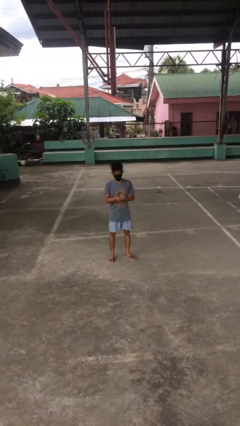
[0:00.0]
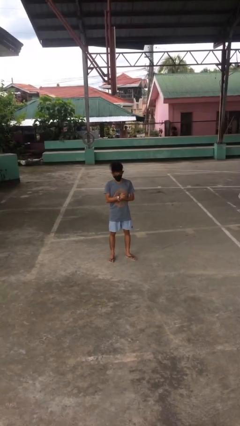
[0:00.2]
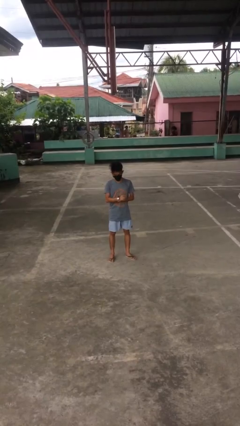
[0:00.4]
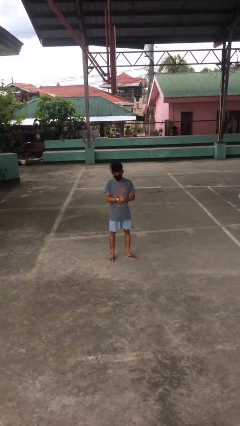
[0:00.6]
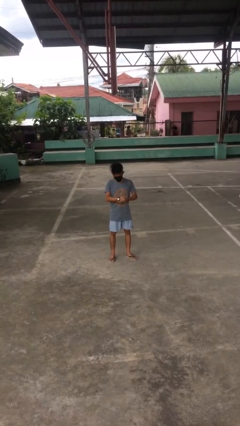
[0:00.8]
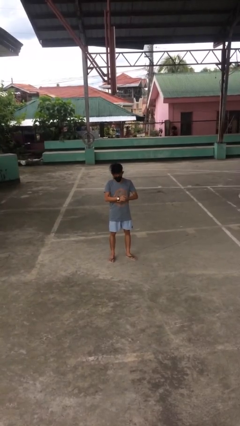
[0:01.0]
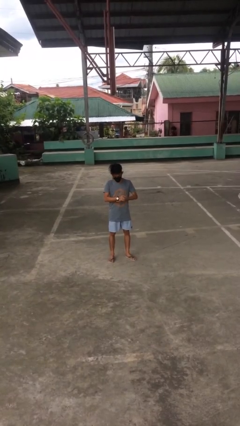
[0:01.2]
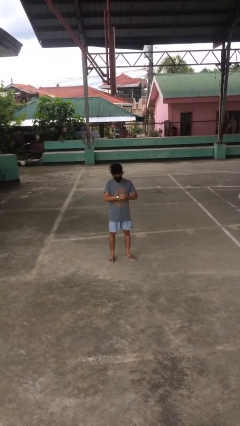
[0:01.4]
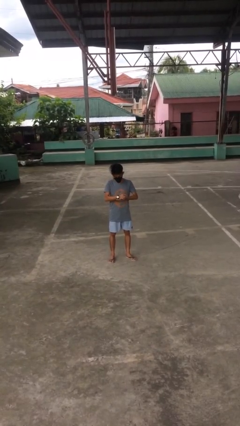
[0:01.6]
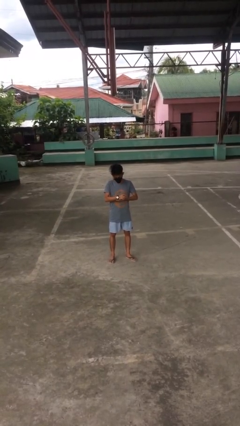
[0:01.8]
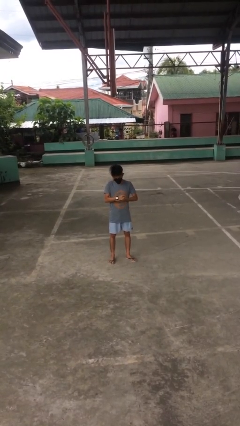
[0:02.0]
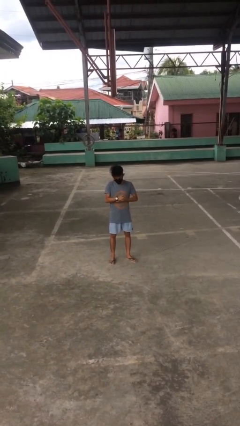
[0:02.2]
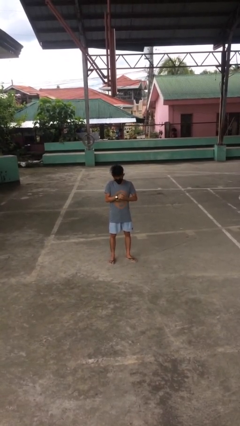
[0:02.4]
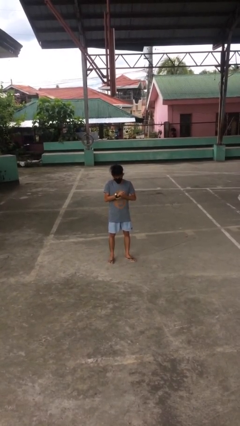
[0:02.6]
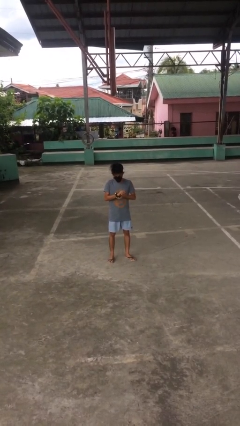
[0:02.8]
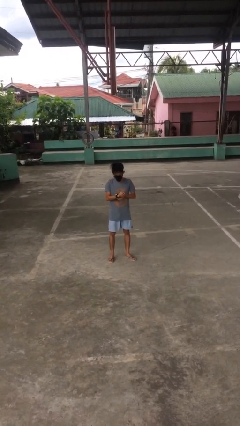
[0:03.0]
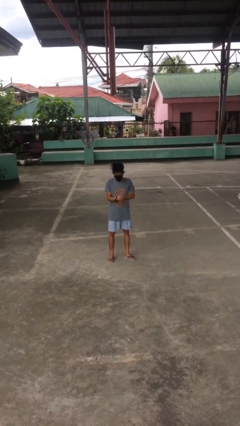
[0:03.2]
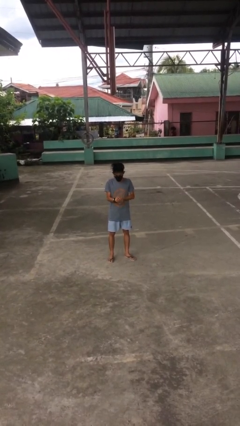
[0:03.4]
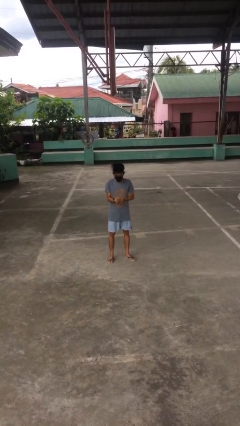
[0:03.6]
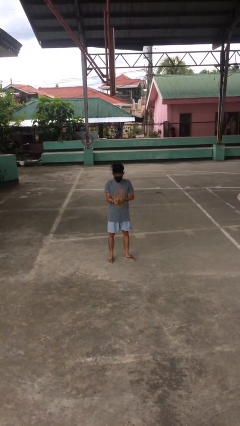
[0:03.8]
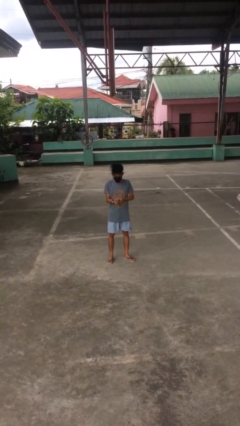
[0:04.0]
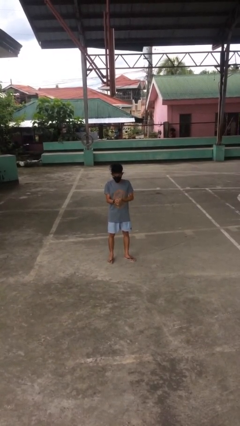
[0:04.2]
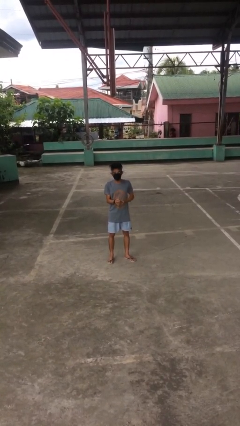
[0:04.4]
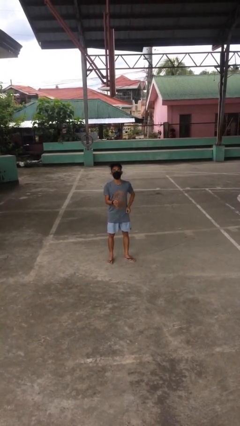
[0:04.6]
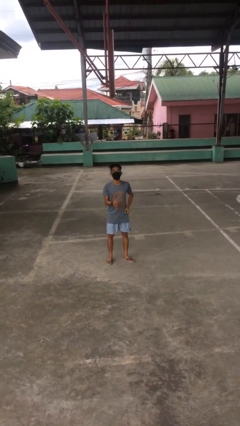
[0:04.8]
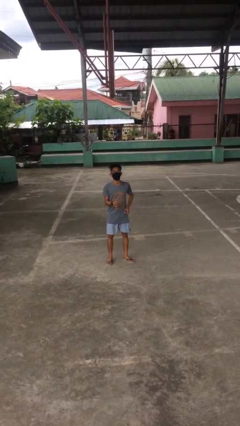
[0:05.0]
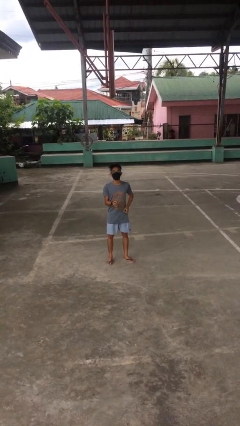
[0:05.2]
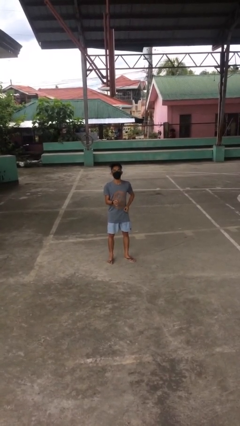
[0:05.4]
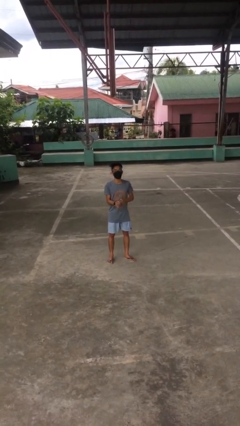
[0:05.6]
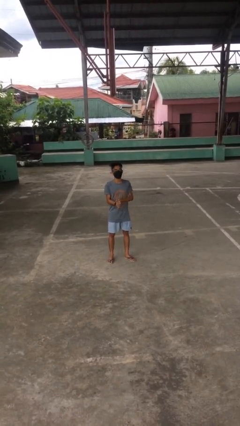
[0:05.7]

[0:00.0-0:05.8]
person puts on wristwatch

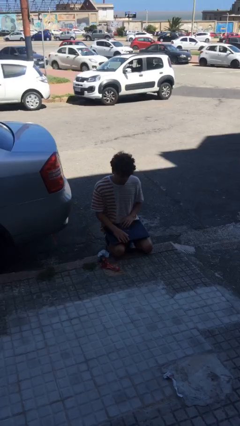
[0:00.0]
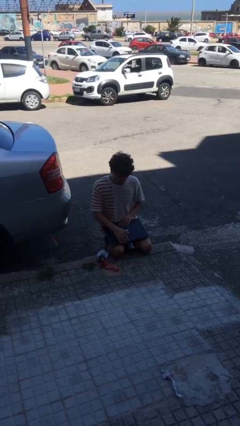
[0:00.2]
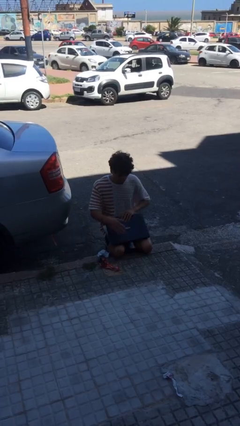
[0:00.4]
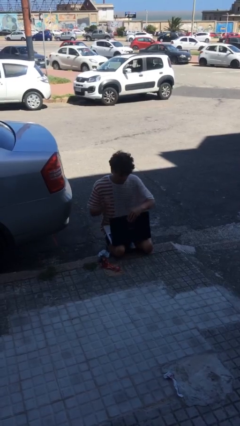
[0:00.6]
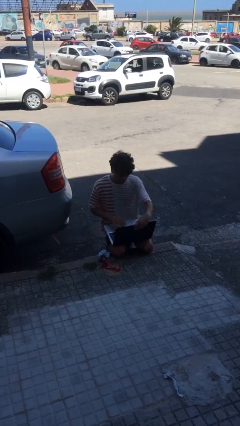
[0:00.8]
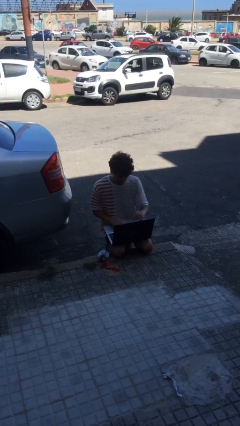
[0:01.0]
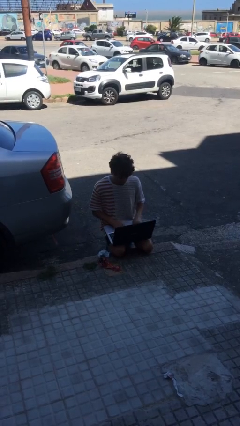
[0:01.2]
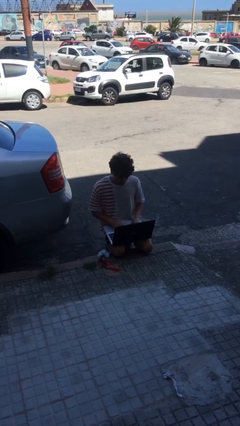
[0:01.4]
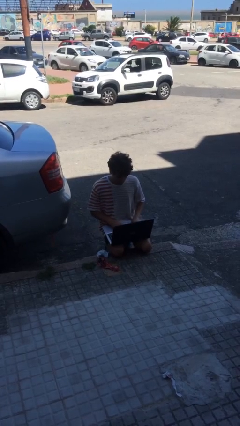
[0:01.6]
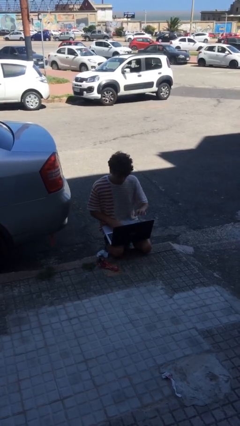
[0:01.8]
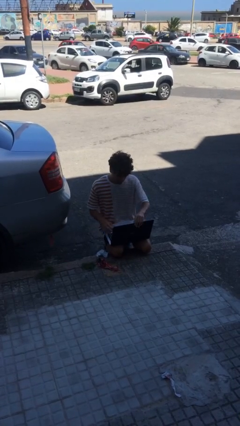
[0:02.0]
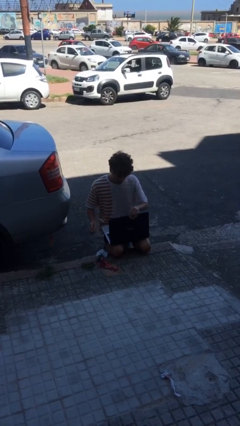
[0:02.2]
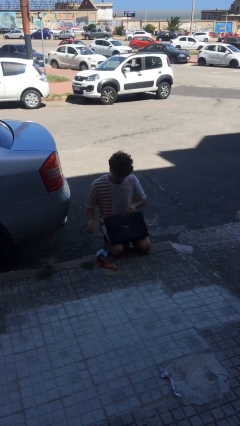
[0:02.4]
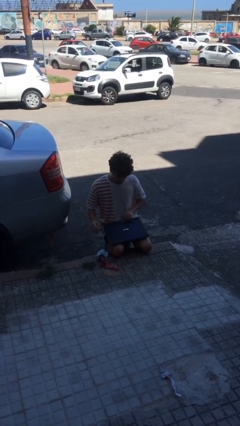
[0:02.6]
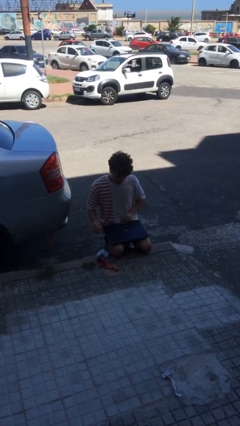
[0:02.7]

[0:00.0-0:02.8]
person interacts with laptop

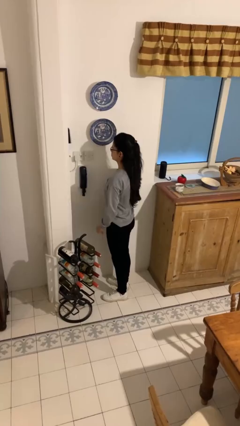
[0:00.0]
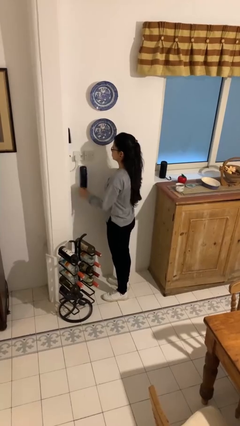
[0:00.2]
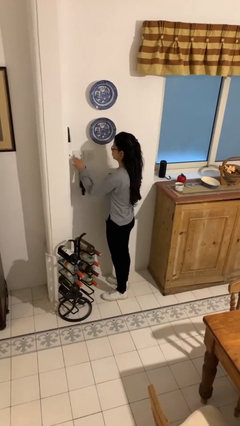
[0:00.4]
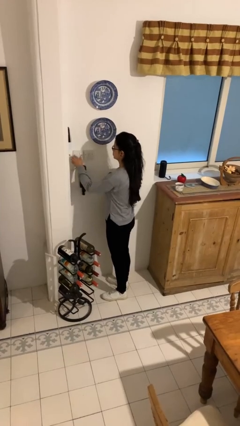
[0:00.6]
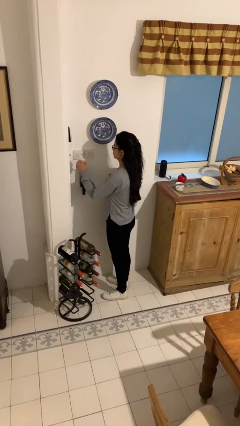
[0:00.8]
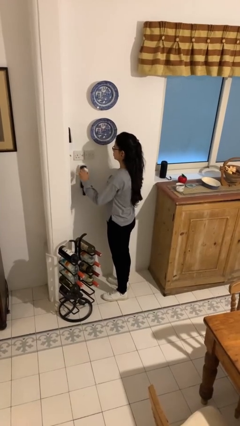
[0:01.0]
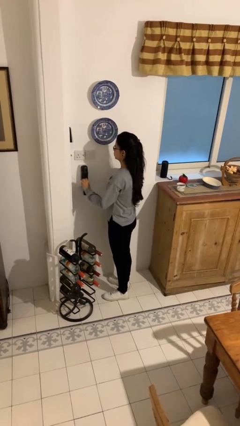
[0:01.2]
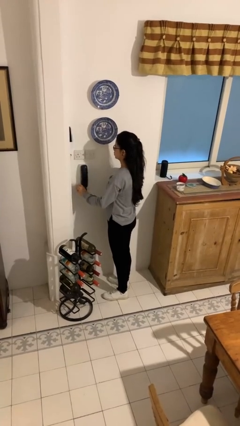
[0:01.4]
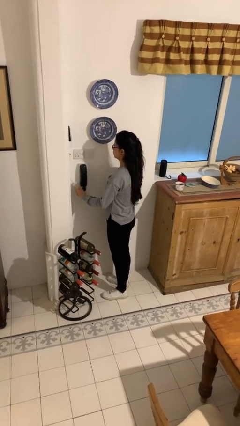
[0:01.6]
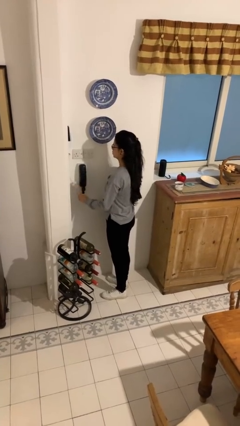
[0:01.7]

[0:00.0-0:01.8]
person unplugs from electrical socket

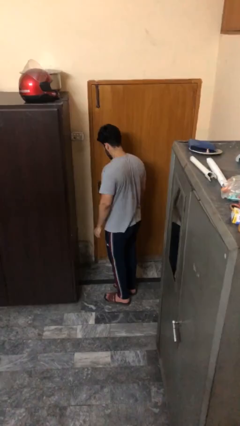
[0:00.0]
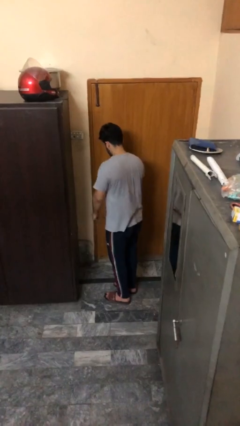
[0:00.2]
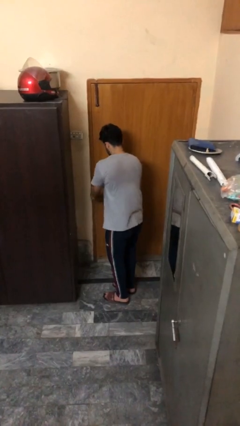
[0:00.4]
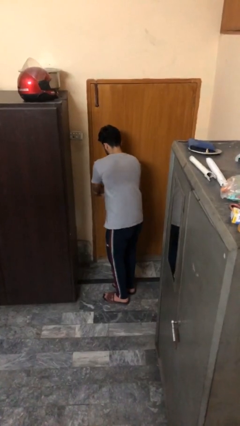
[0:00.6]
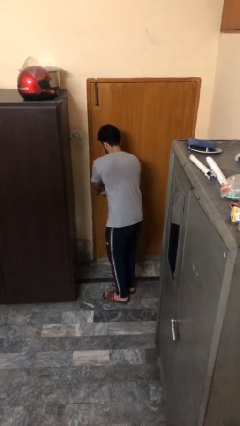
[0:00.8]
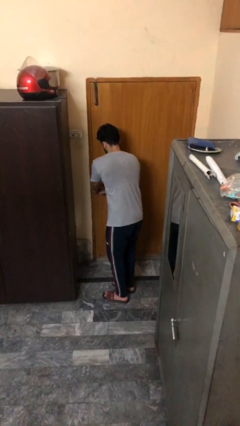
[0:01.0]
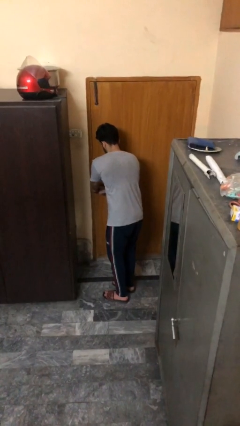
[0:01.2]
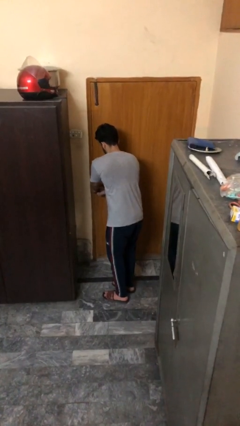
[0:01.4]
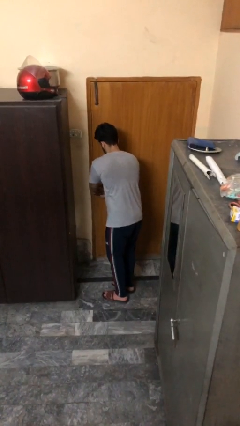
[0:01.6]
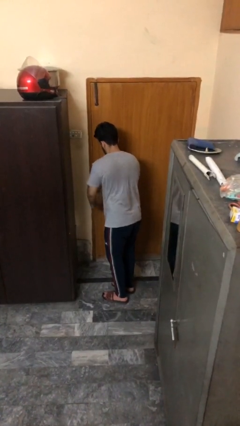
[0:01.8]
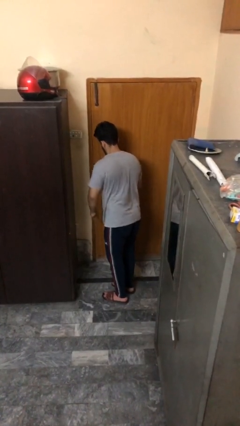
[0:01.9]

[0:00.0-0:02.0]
person locks door with keys

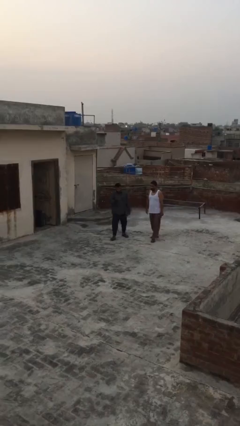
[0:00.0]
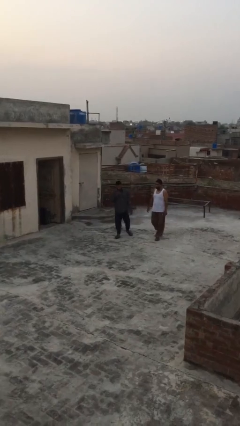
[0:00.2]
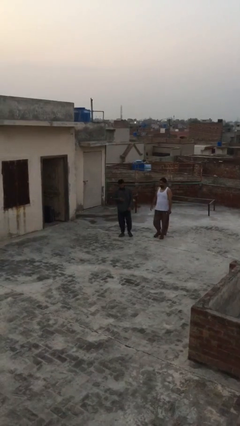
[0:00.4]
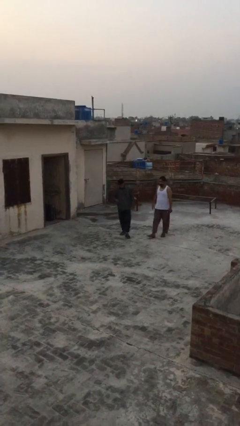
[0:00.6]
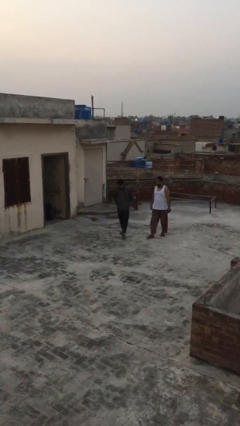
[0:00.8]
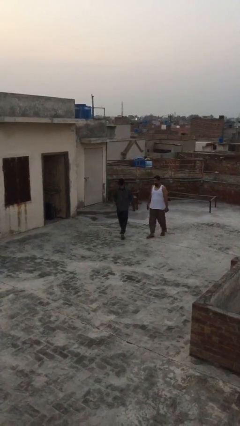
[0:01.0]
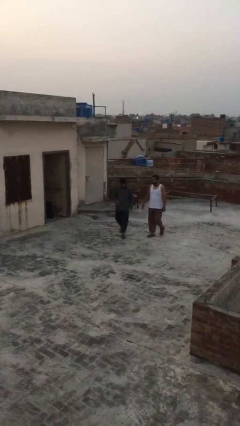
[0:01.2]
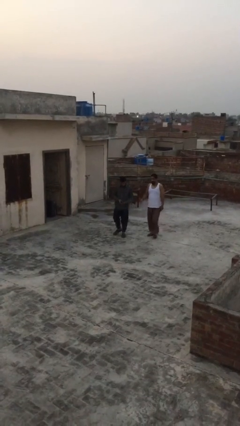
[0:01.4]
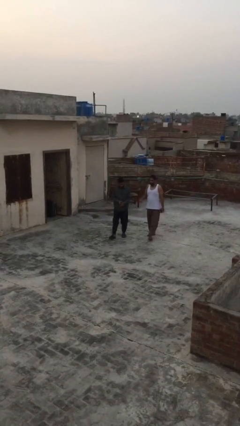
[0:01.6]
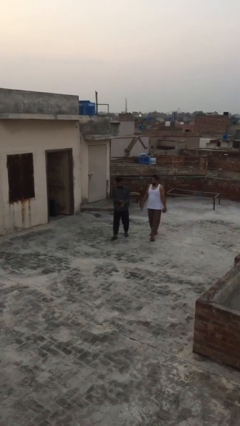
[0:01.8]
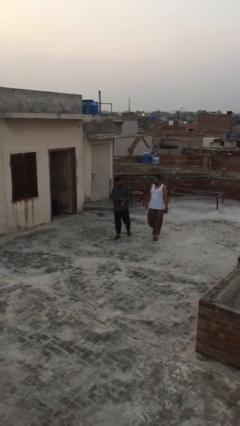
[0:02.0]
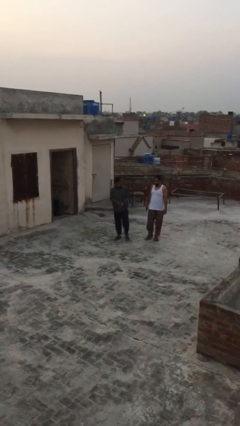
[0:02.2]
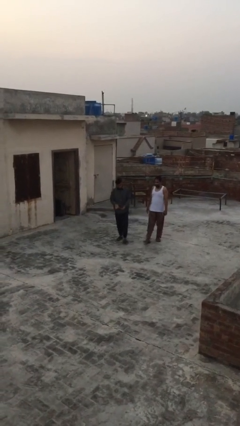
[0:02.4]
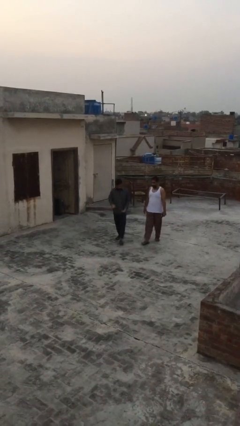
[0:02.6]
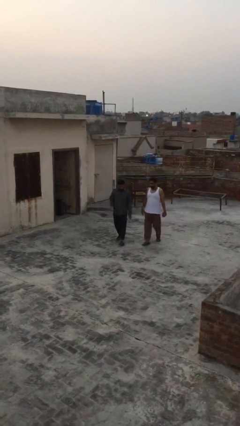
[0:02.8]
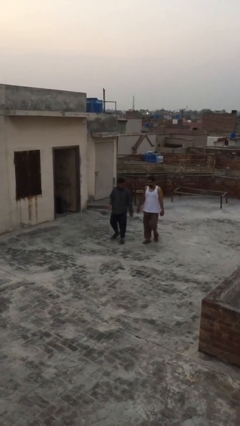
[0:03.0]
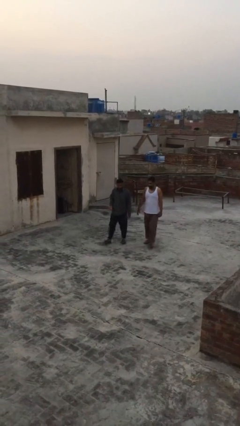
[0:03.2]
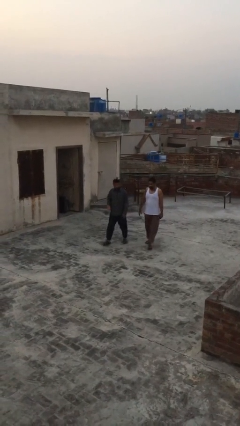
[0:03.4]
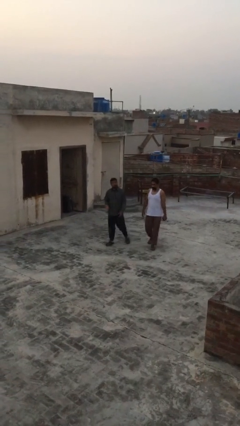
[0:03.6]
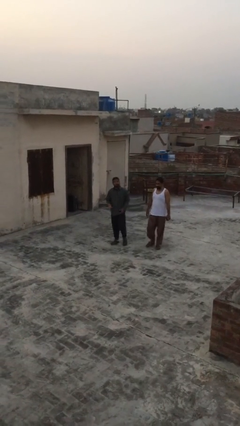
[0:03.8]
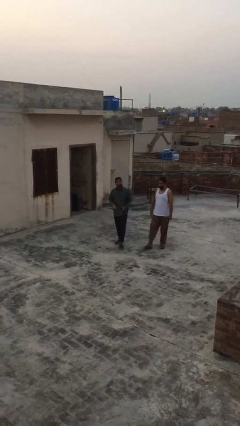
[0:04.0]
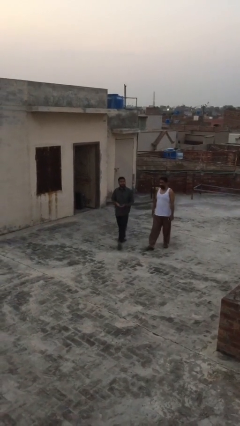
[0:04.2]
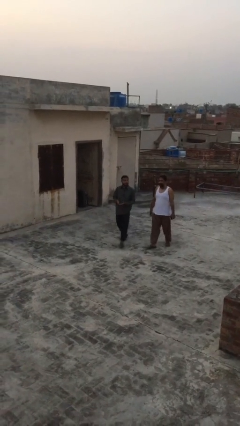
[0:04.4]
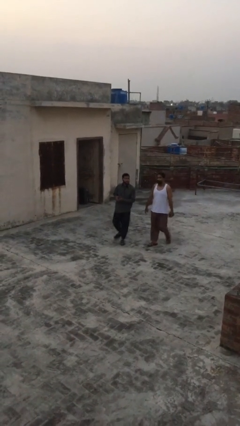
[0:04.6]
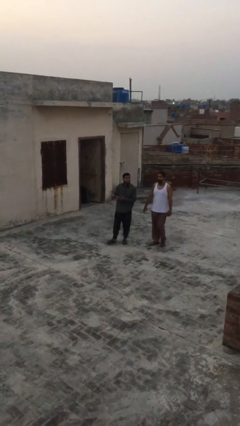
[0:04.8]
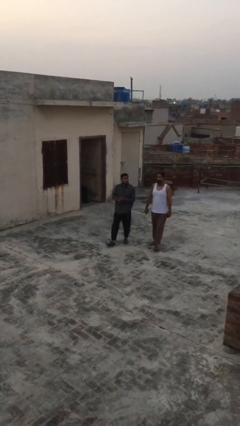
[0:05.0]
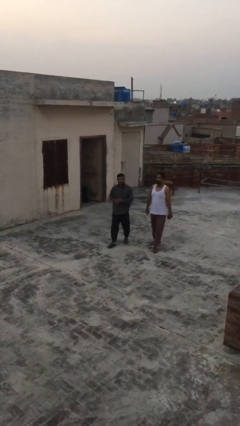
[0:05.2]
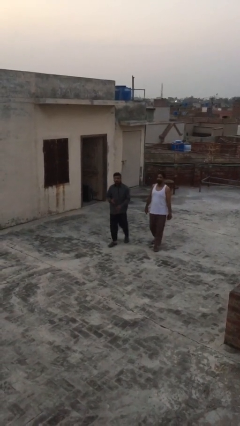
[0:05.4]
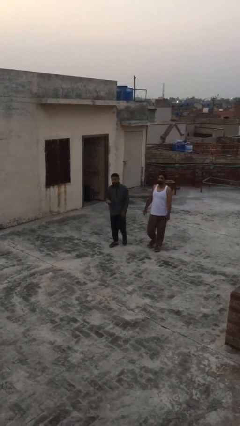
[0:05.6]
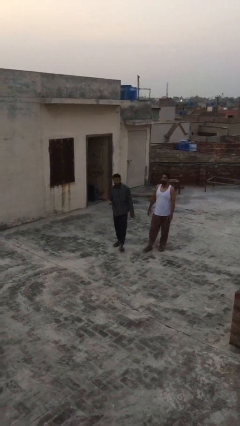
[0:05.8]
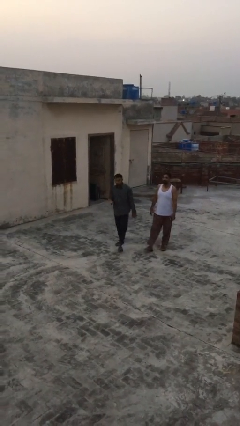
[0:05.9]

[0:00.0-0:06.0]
person talks to person
